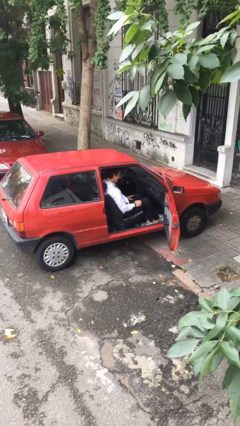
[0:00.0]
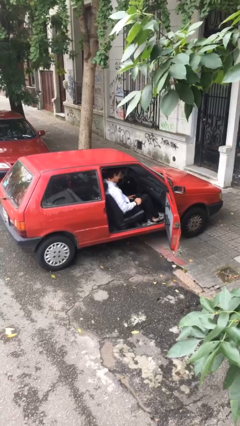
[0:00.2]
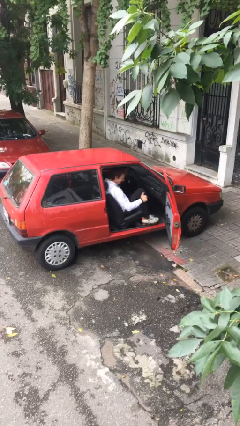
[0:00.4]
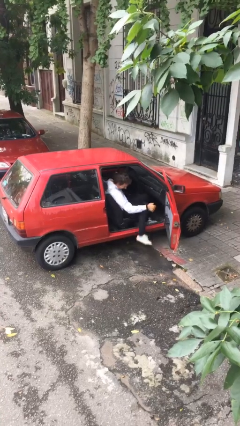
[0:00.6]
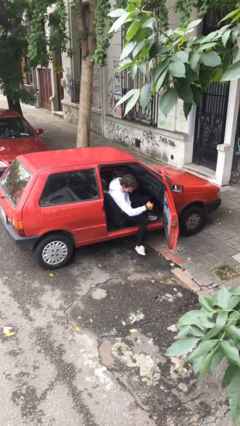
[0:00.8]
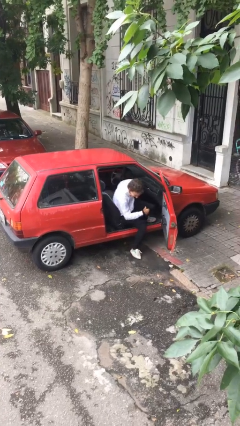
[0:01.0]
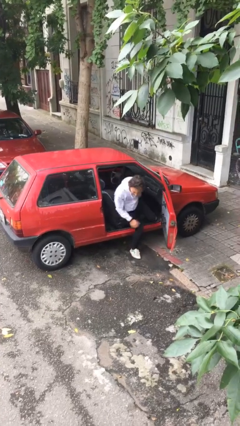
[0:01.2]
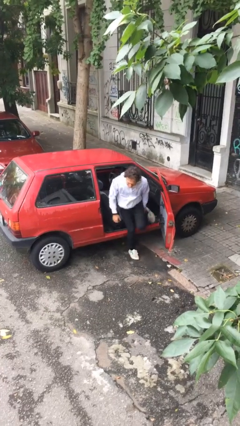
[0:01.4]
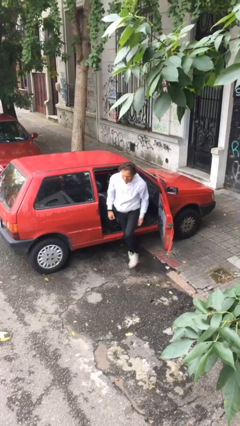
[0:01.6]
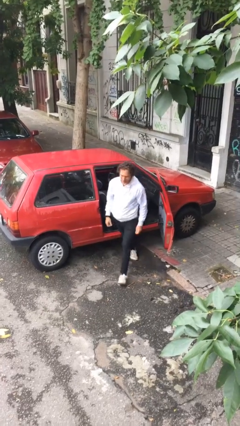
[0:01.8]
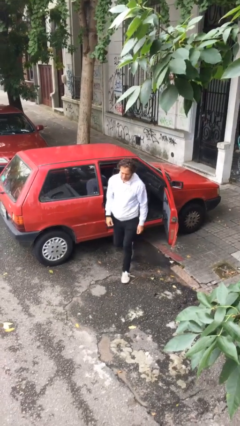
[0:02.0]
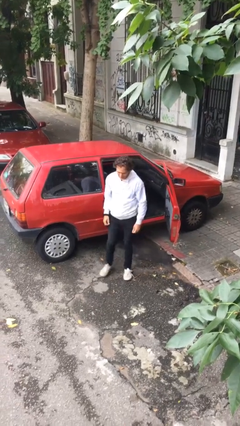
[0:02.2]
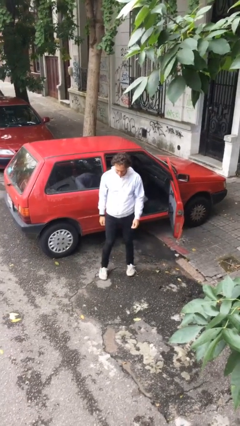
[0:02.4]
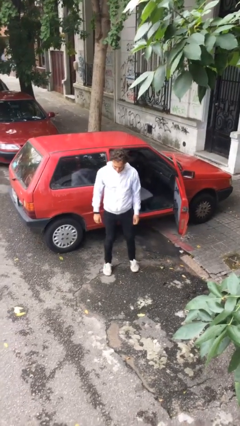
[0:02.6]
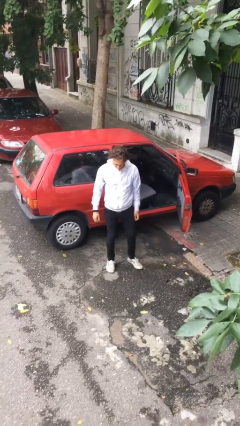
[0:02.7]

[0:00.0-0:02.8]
person exits car

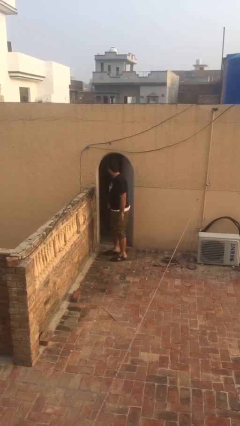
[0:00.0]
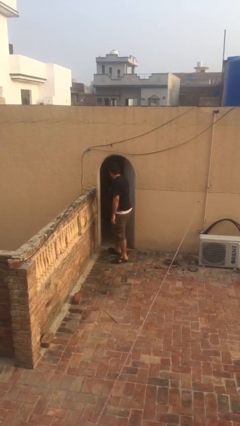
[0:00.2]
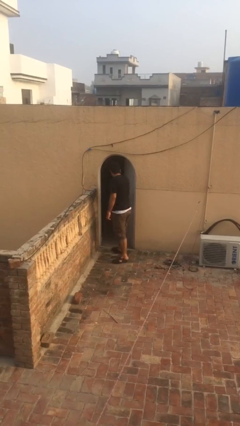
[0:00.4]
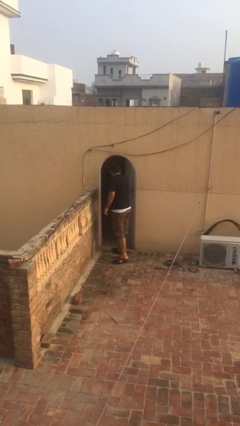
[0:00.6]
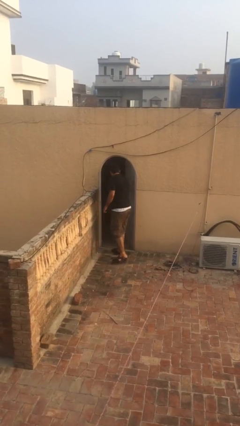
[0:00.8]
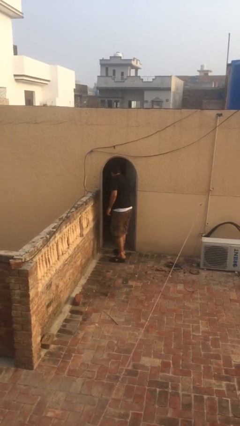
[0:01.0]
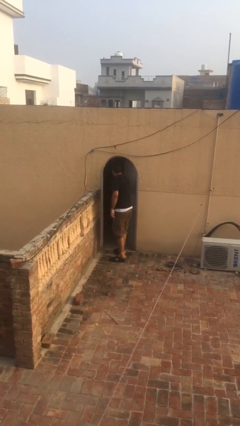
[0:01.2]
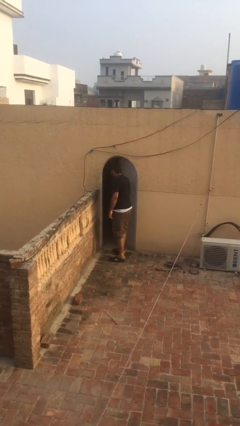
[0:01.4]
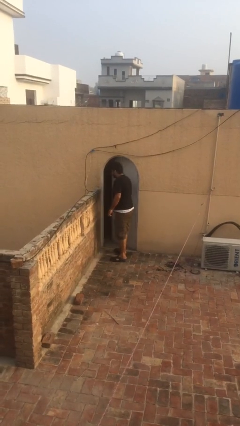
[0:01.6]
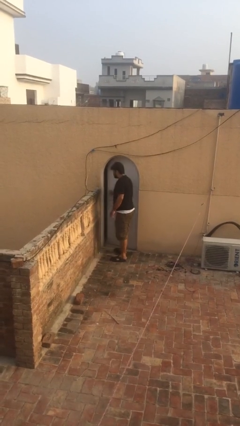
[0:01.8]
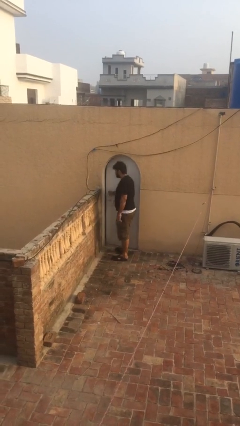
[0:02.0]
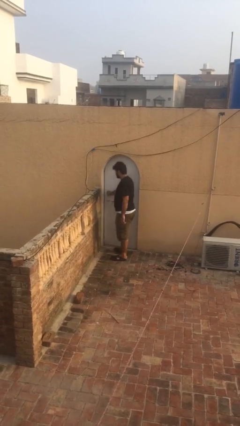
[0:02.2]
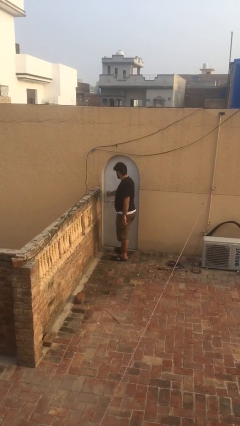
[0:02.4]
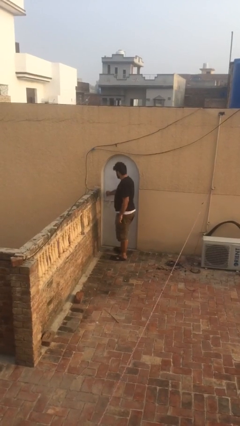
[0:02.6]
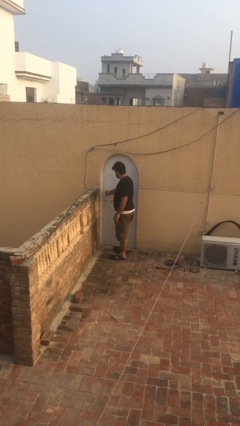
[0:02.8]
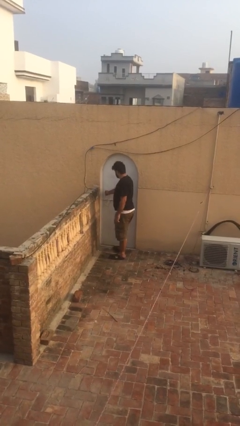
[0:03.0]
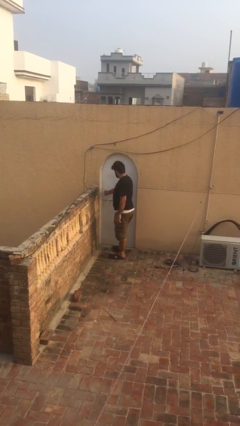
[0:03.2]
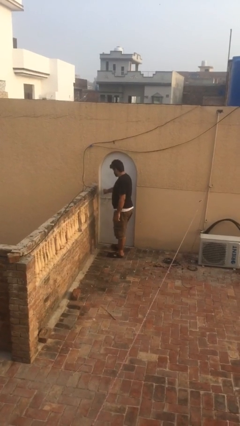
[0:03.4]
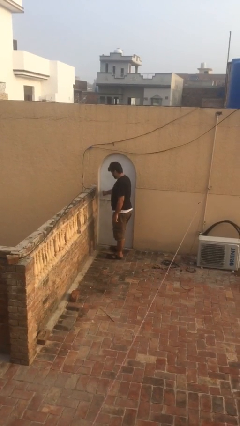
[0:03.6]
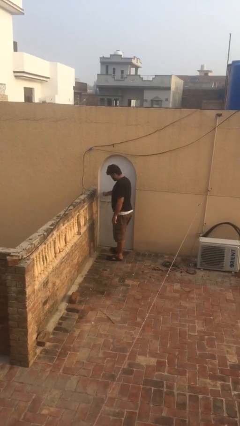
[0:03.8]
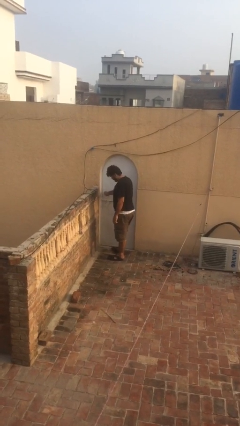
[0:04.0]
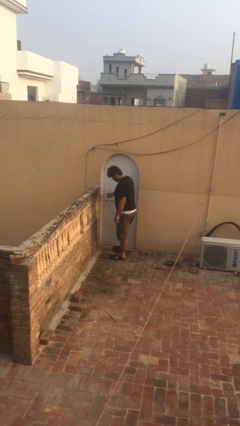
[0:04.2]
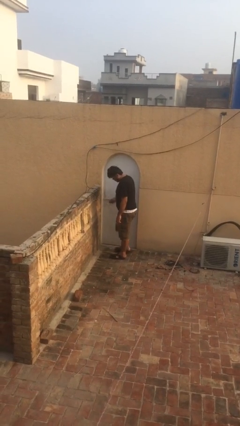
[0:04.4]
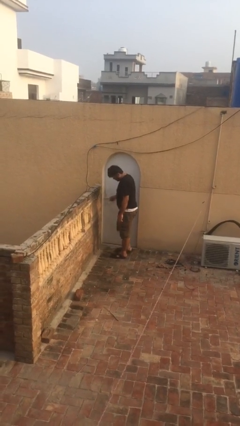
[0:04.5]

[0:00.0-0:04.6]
person closes facility door

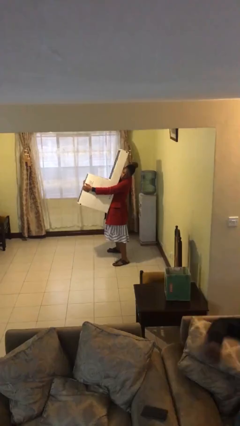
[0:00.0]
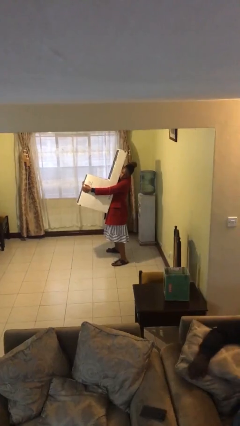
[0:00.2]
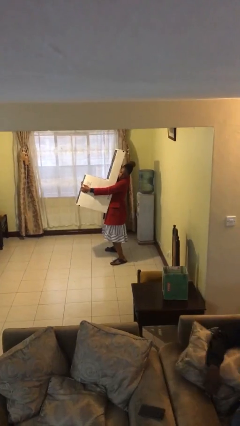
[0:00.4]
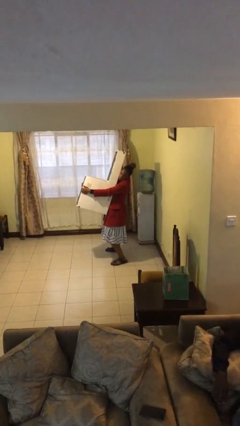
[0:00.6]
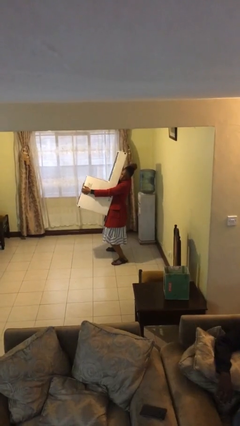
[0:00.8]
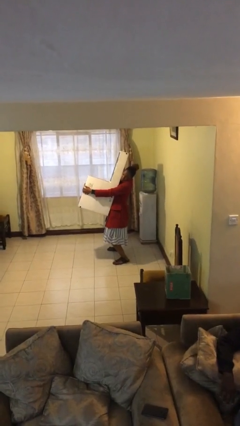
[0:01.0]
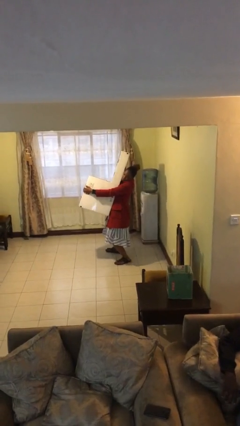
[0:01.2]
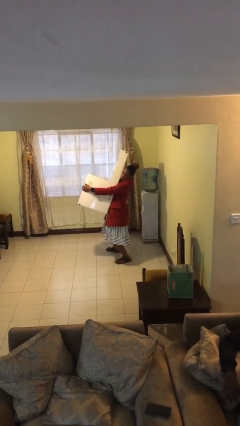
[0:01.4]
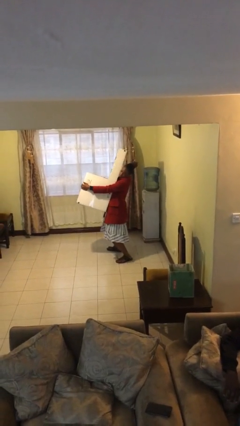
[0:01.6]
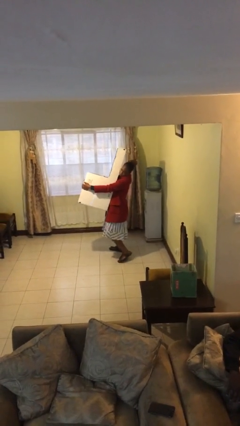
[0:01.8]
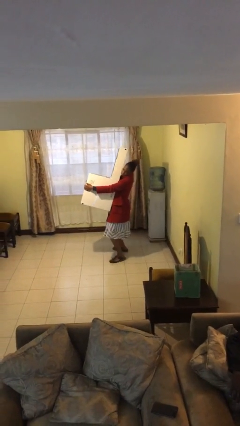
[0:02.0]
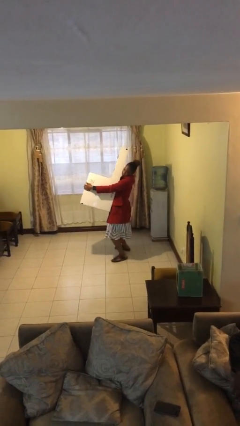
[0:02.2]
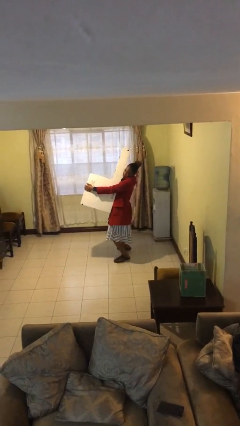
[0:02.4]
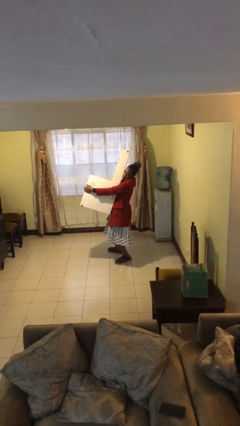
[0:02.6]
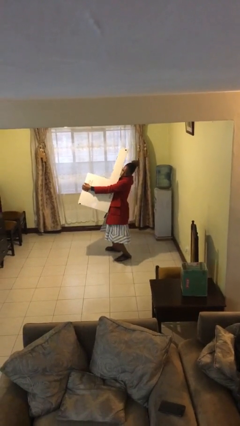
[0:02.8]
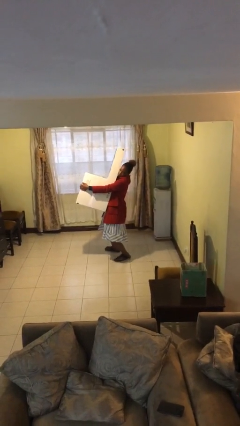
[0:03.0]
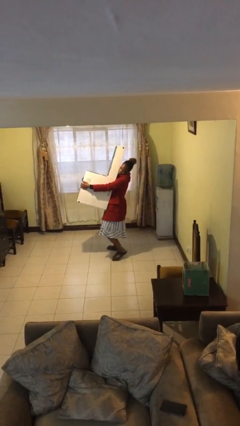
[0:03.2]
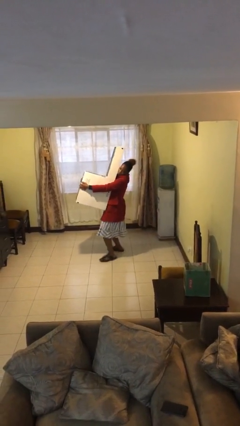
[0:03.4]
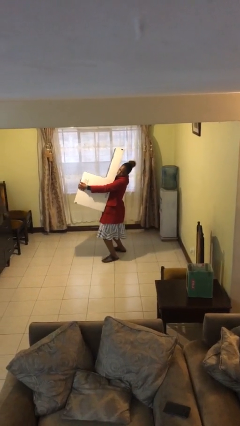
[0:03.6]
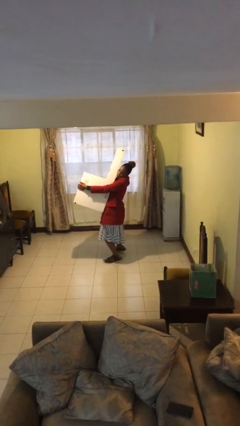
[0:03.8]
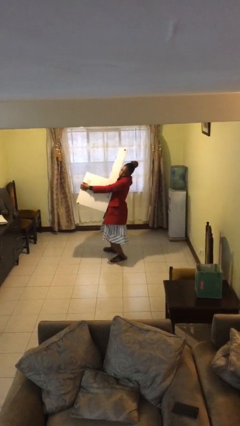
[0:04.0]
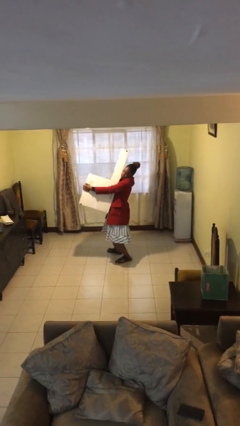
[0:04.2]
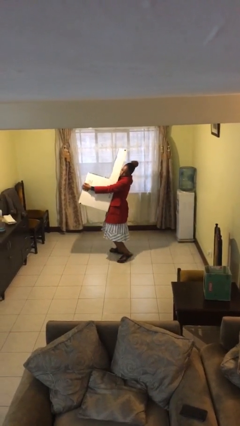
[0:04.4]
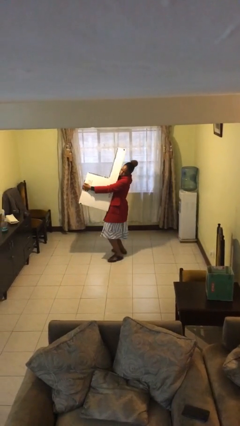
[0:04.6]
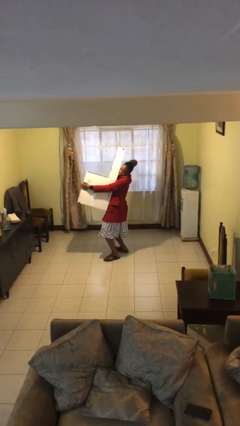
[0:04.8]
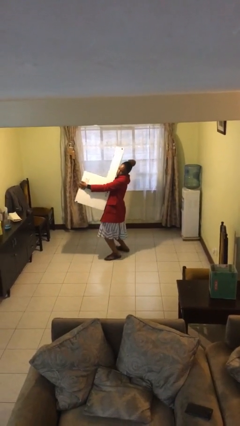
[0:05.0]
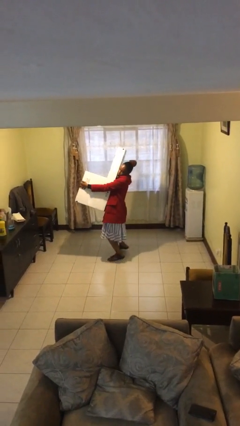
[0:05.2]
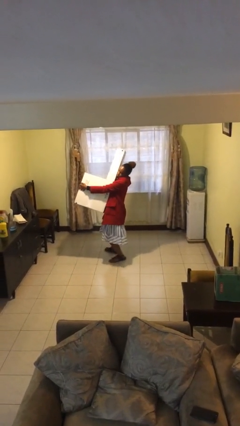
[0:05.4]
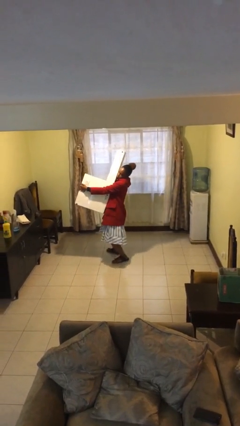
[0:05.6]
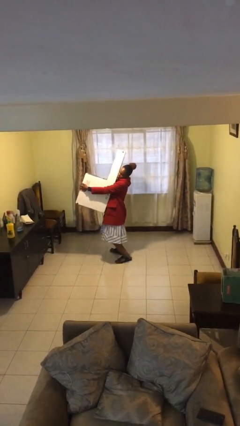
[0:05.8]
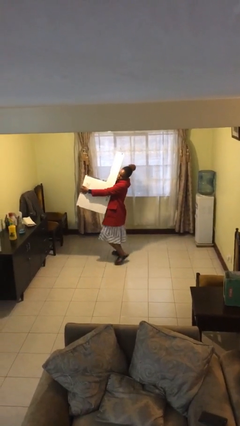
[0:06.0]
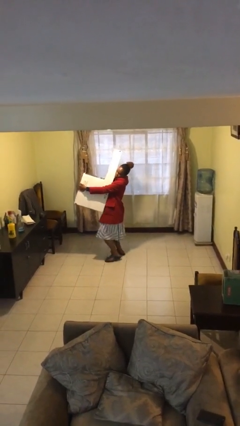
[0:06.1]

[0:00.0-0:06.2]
person carries heavy object

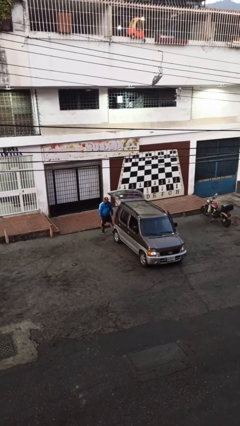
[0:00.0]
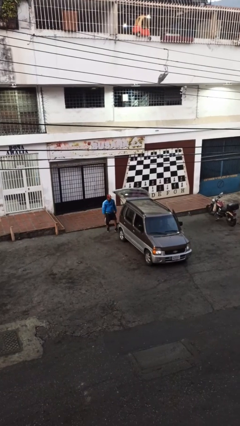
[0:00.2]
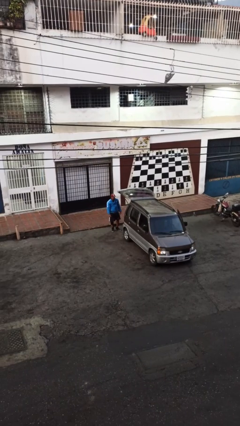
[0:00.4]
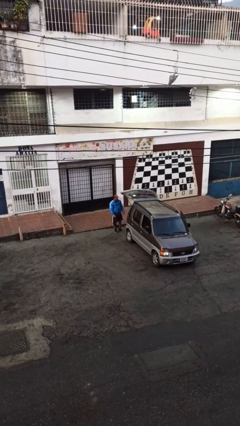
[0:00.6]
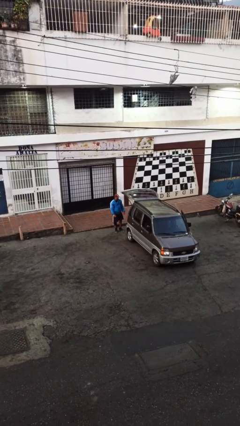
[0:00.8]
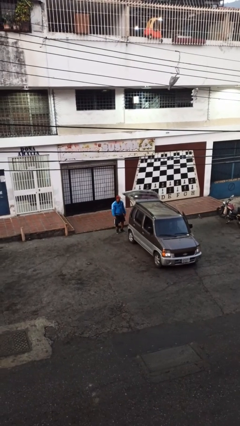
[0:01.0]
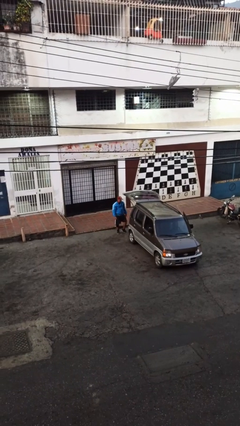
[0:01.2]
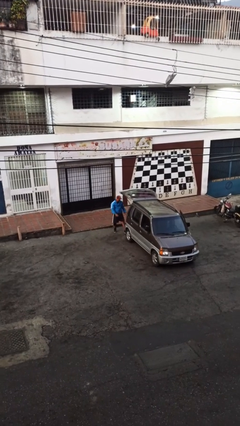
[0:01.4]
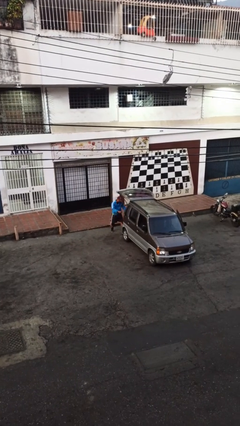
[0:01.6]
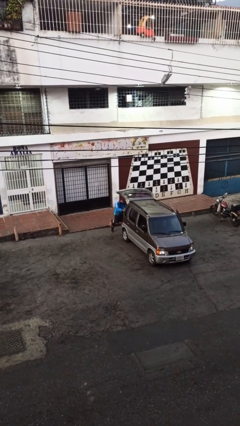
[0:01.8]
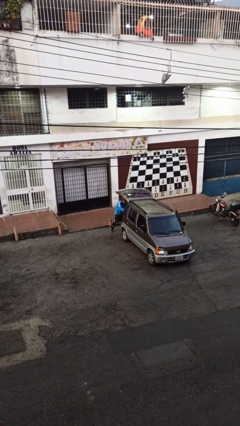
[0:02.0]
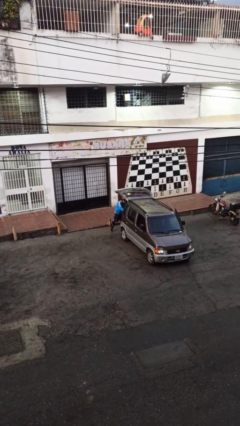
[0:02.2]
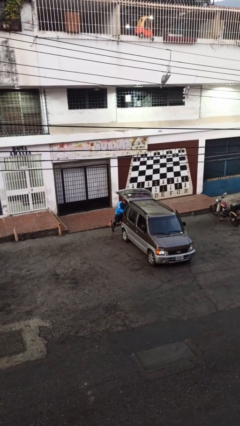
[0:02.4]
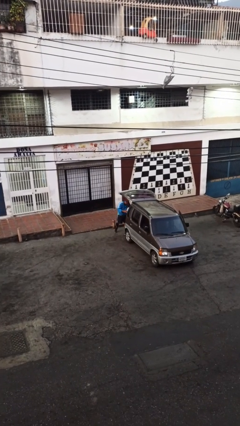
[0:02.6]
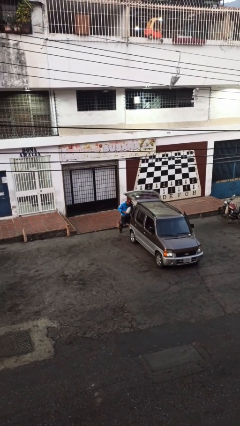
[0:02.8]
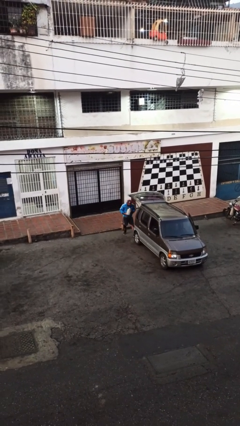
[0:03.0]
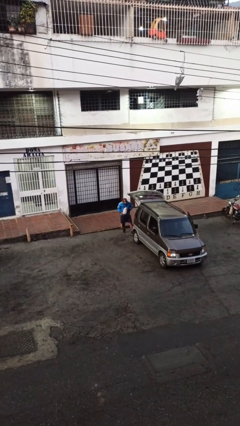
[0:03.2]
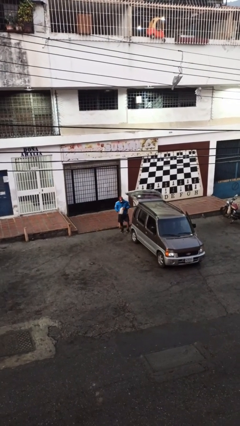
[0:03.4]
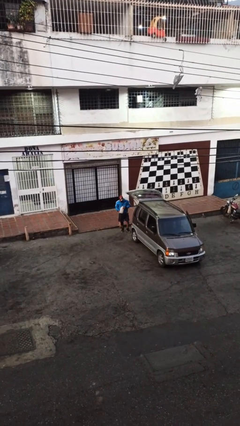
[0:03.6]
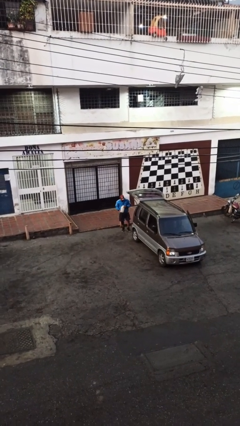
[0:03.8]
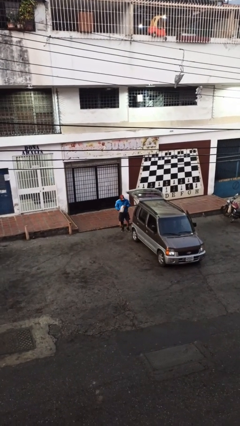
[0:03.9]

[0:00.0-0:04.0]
person unloads car
